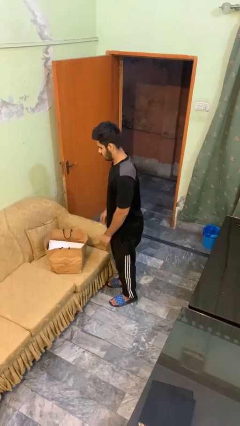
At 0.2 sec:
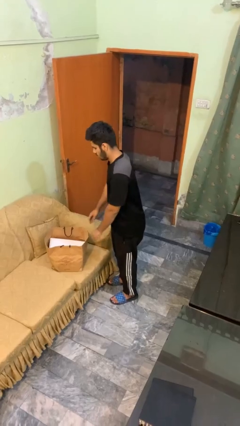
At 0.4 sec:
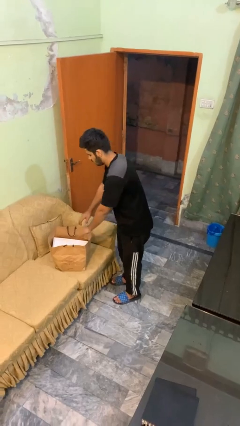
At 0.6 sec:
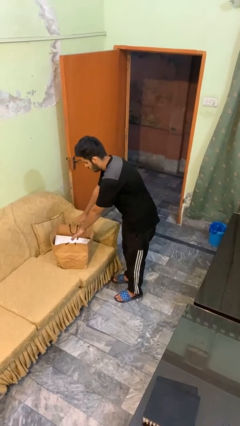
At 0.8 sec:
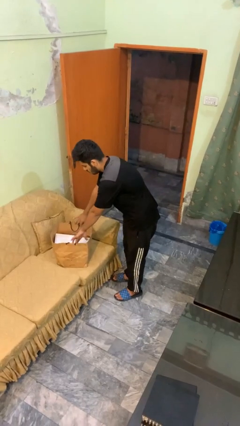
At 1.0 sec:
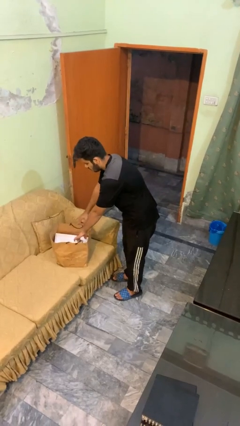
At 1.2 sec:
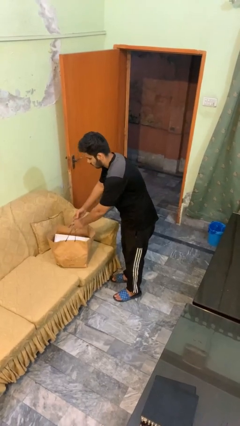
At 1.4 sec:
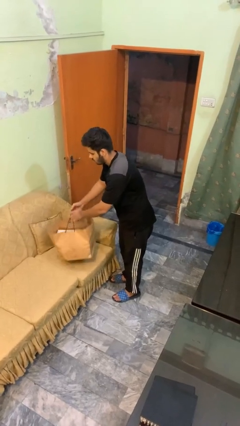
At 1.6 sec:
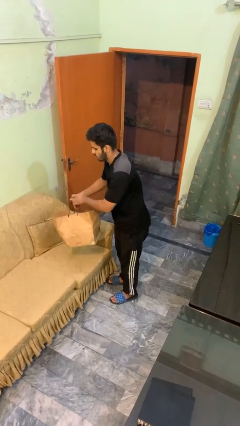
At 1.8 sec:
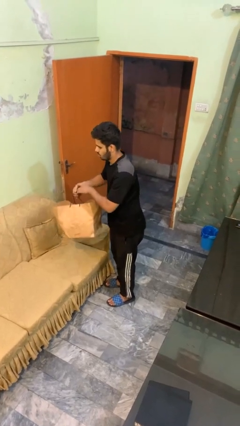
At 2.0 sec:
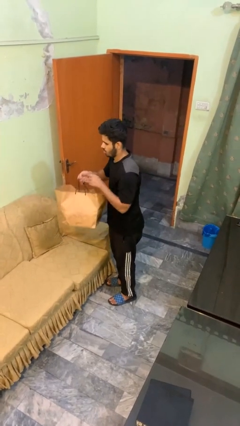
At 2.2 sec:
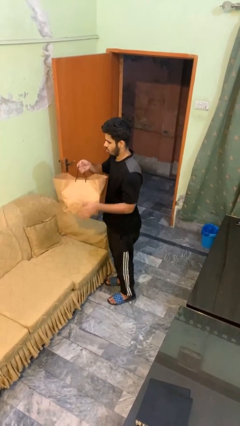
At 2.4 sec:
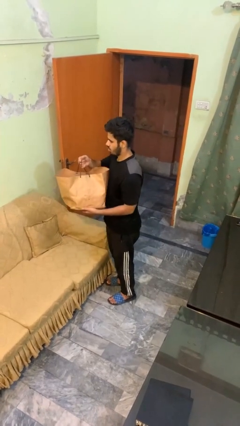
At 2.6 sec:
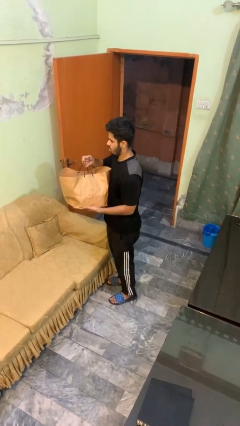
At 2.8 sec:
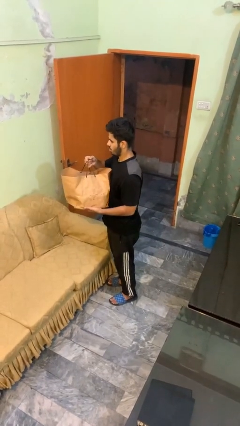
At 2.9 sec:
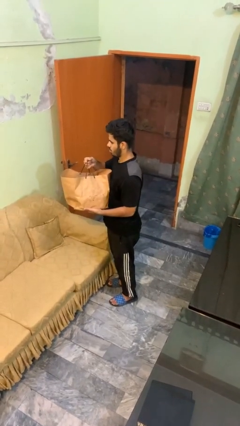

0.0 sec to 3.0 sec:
person picks up object from couch

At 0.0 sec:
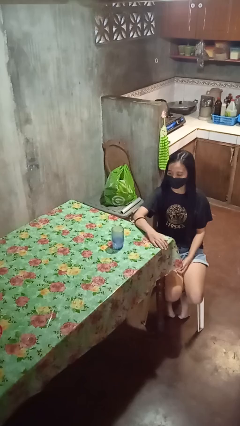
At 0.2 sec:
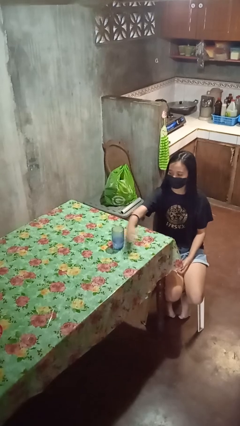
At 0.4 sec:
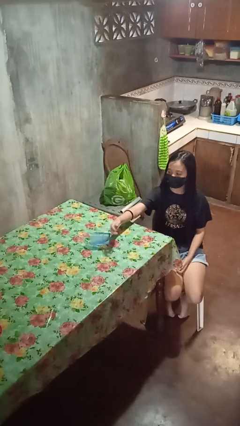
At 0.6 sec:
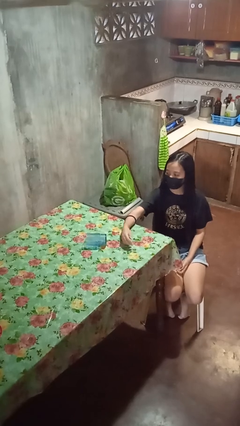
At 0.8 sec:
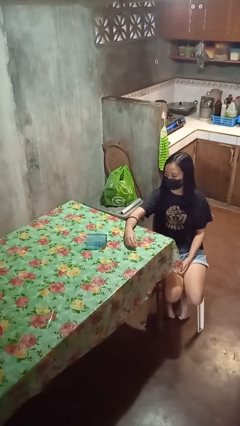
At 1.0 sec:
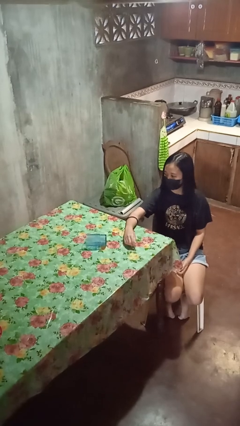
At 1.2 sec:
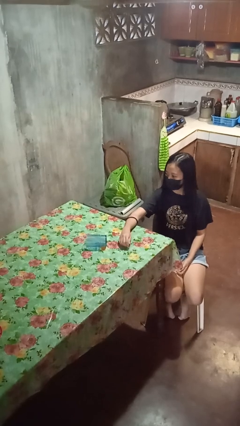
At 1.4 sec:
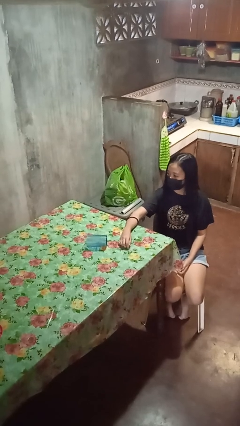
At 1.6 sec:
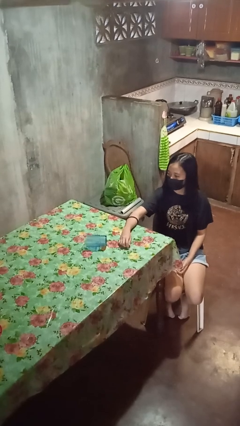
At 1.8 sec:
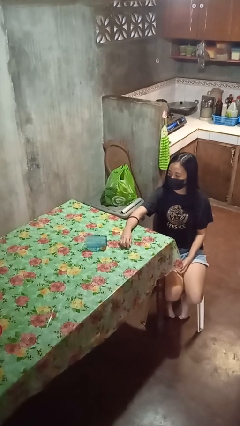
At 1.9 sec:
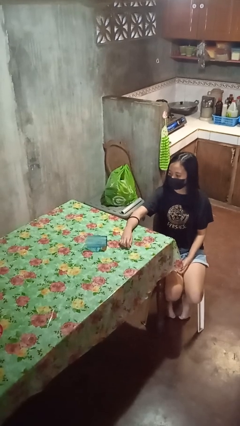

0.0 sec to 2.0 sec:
person spills on table

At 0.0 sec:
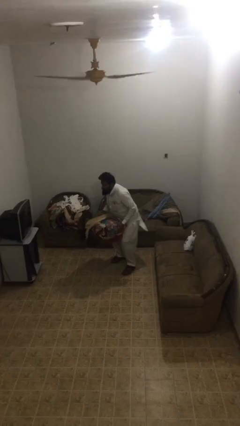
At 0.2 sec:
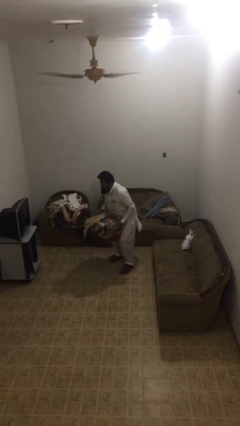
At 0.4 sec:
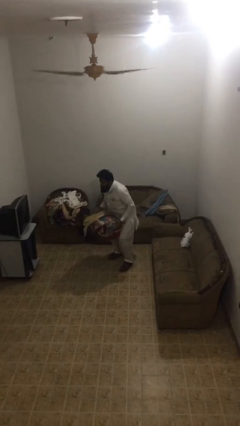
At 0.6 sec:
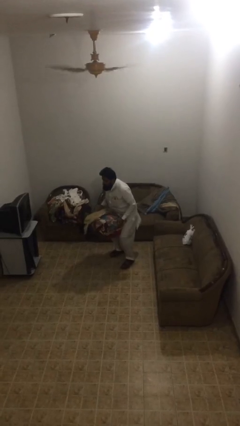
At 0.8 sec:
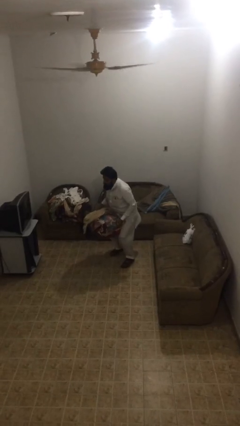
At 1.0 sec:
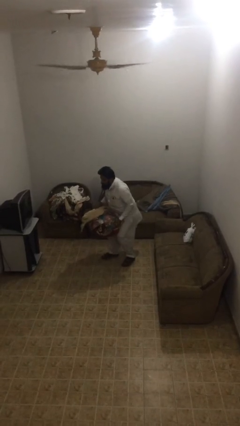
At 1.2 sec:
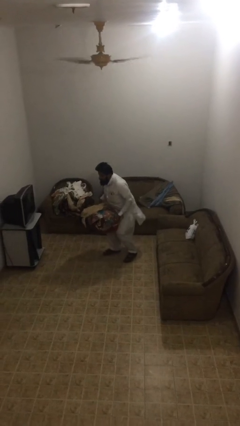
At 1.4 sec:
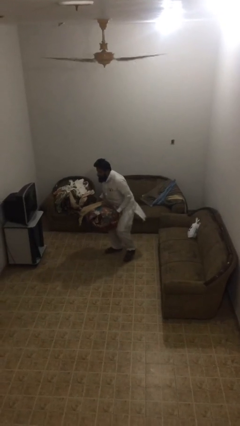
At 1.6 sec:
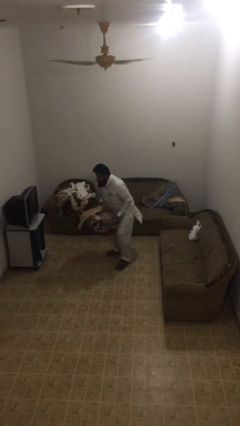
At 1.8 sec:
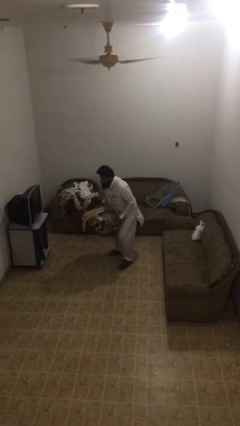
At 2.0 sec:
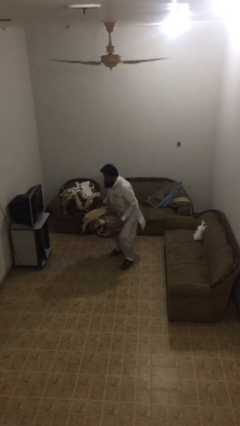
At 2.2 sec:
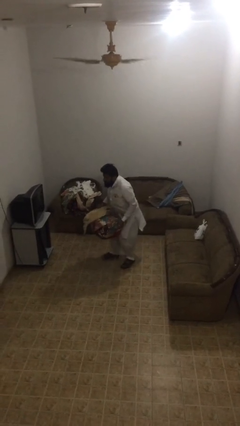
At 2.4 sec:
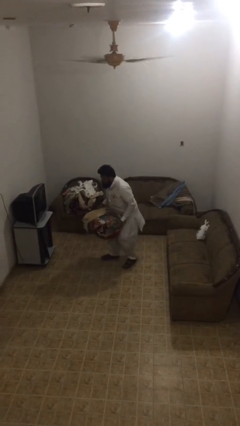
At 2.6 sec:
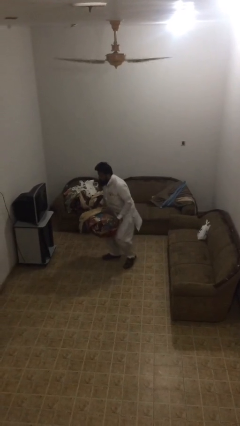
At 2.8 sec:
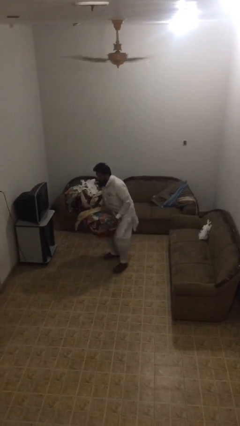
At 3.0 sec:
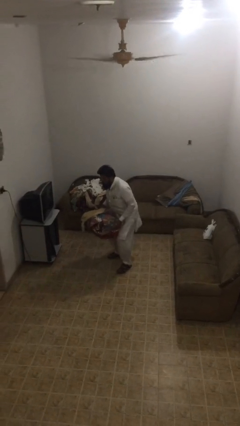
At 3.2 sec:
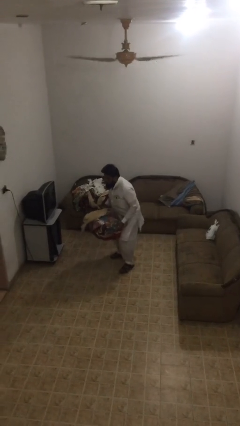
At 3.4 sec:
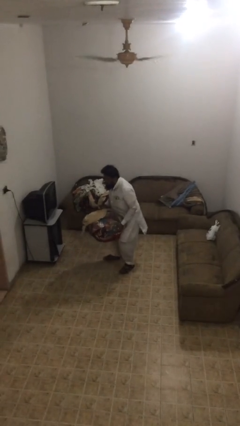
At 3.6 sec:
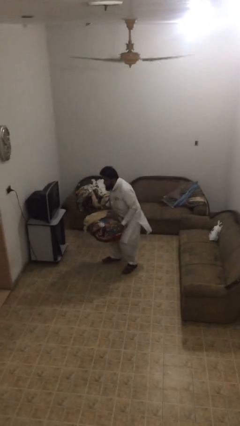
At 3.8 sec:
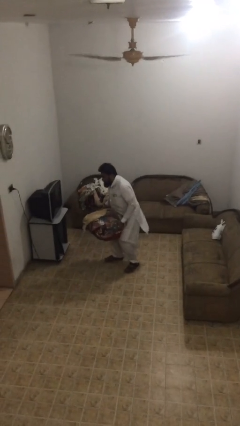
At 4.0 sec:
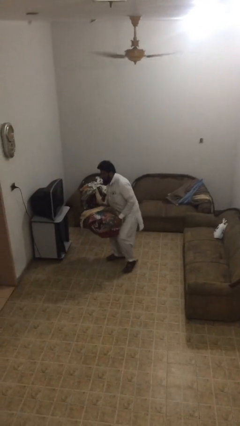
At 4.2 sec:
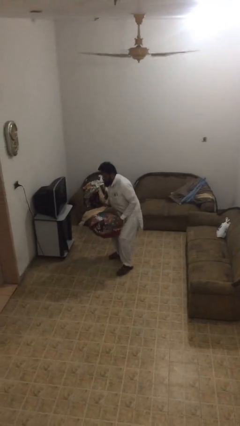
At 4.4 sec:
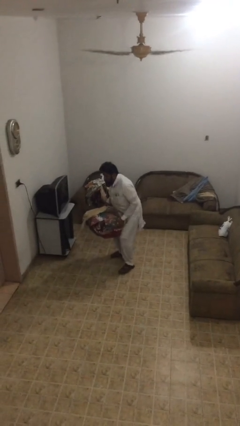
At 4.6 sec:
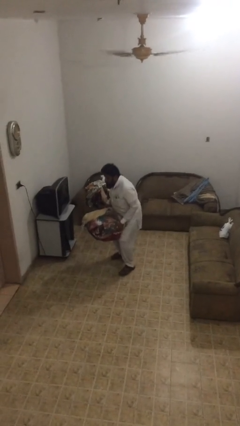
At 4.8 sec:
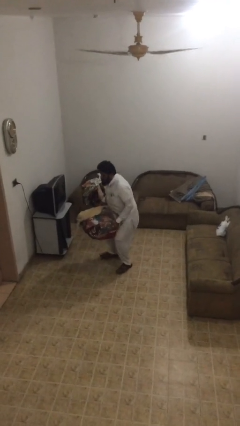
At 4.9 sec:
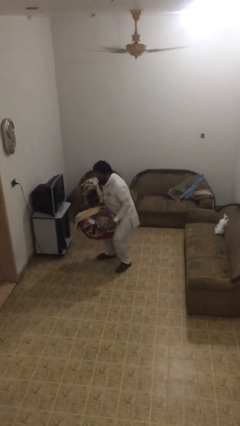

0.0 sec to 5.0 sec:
person carries heavy object

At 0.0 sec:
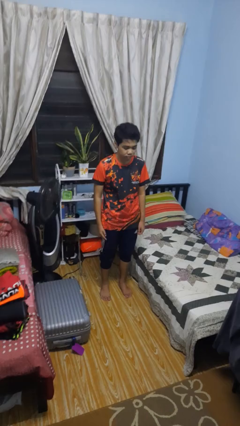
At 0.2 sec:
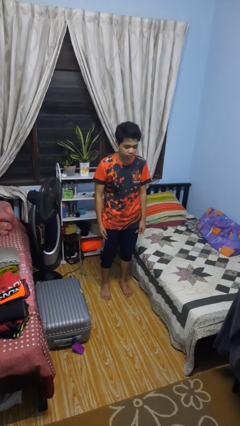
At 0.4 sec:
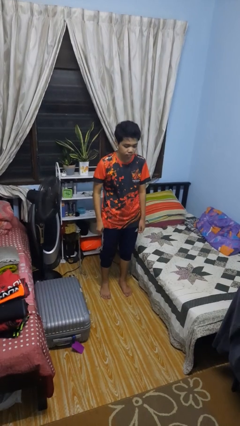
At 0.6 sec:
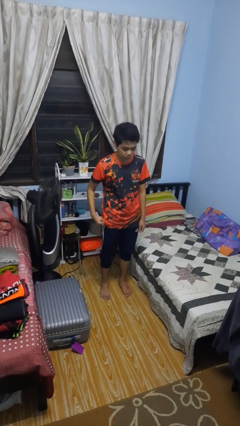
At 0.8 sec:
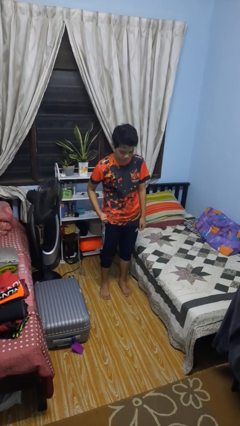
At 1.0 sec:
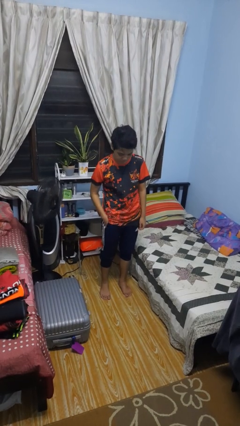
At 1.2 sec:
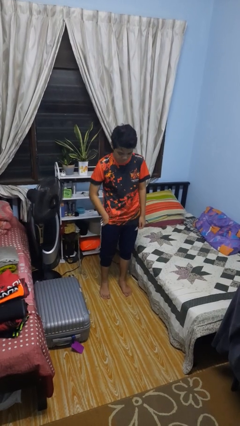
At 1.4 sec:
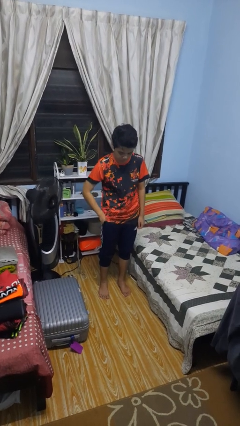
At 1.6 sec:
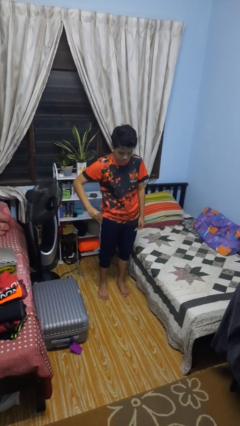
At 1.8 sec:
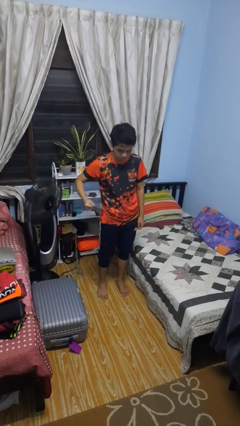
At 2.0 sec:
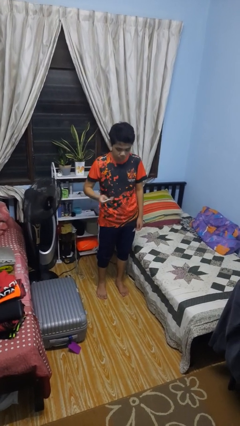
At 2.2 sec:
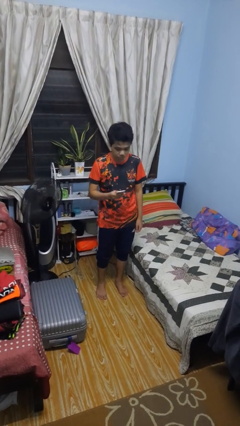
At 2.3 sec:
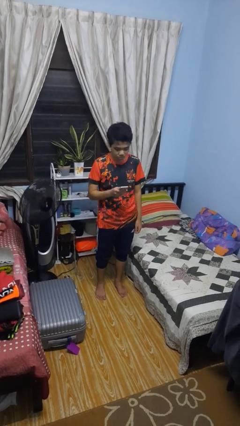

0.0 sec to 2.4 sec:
person takes phone from pocket

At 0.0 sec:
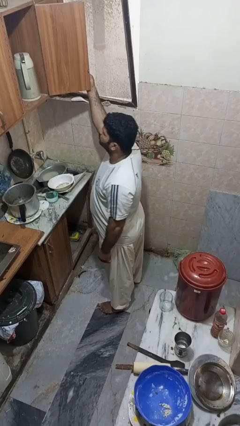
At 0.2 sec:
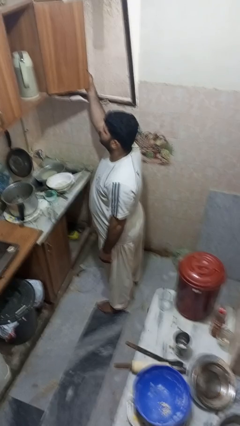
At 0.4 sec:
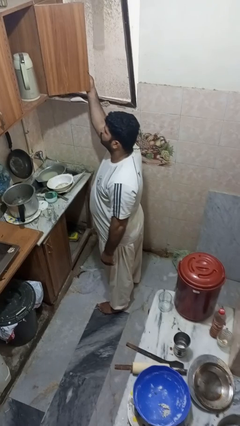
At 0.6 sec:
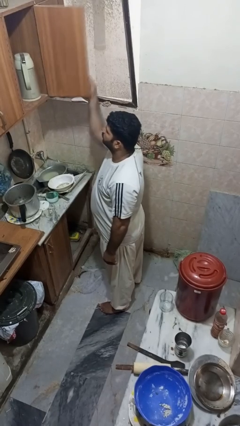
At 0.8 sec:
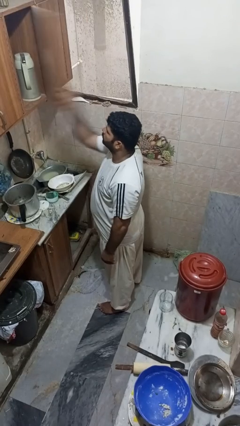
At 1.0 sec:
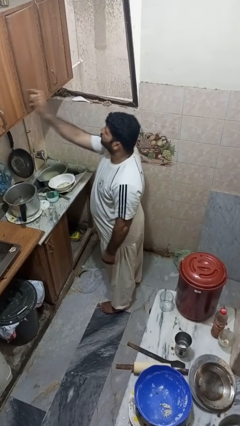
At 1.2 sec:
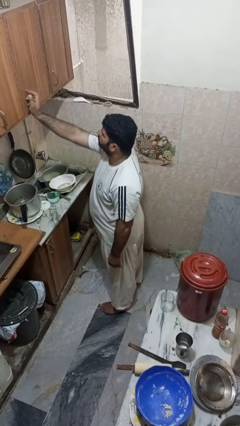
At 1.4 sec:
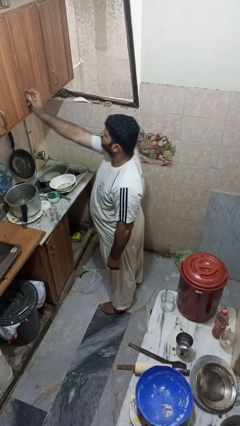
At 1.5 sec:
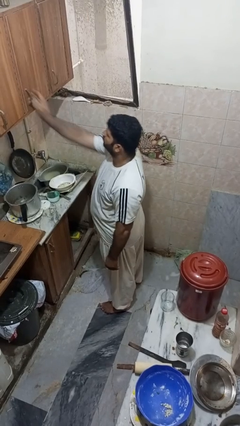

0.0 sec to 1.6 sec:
person closes cabinet

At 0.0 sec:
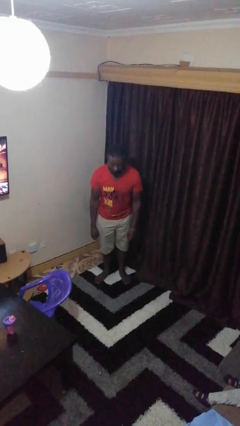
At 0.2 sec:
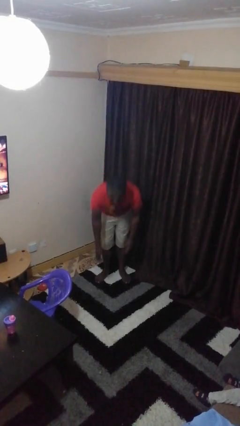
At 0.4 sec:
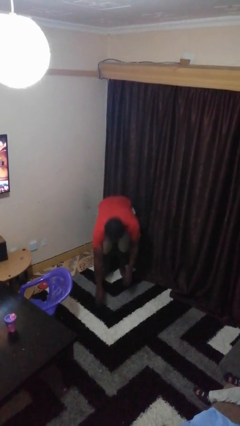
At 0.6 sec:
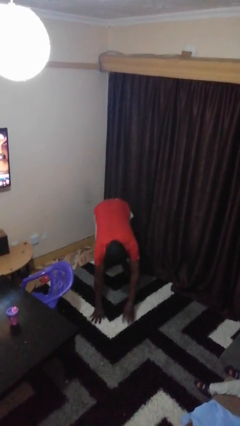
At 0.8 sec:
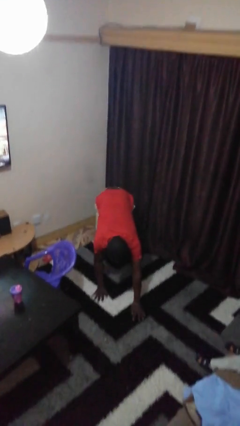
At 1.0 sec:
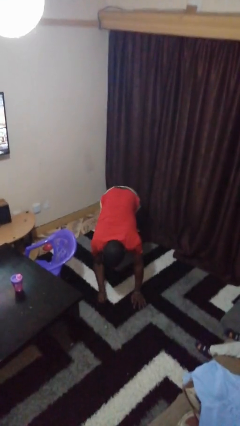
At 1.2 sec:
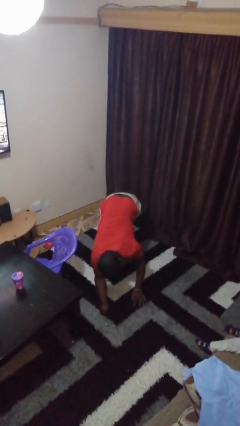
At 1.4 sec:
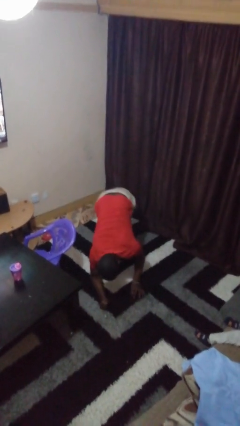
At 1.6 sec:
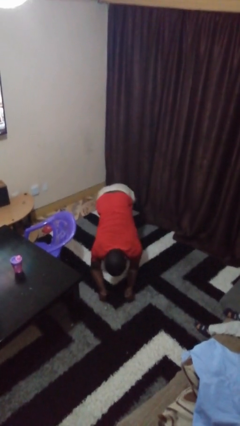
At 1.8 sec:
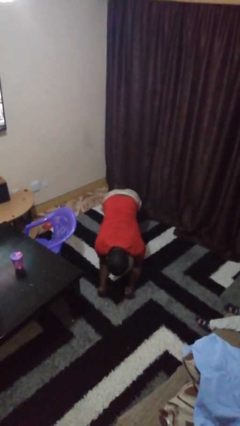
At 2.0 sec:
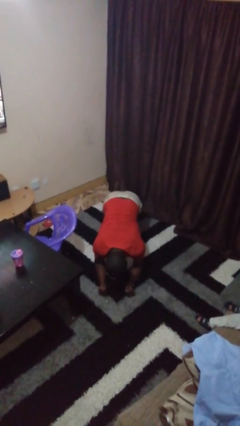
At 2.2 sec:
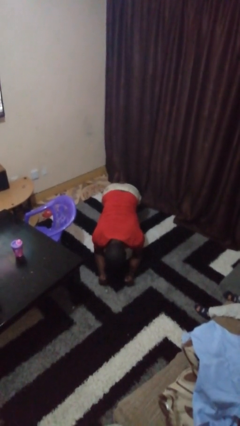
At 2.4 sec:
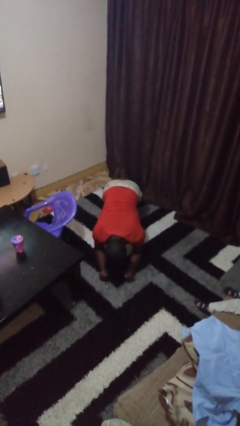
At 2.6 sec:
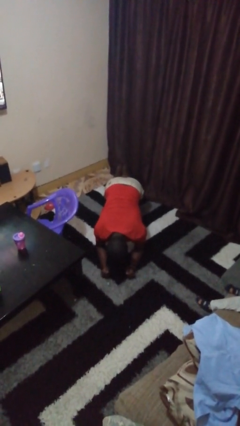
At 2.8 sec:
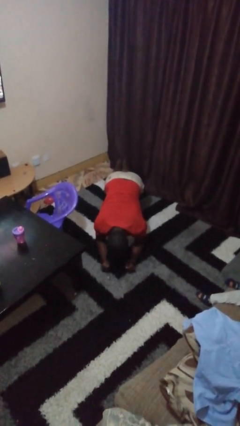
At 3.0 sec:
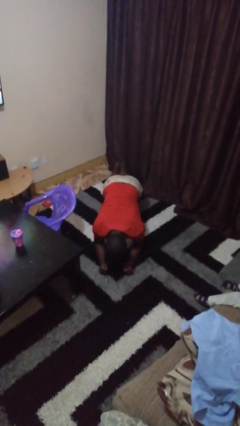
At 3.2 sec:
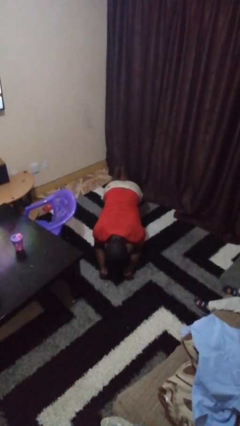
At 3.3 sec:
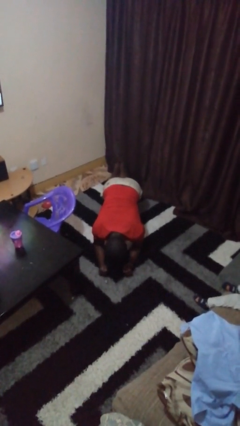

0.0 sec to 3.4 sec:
person exercises with plank
